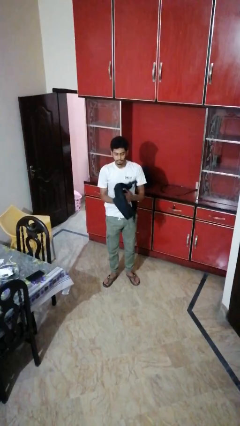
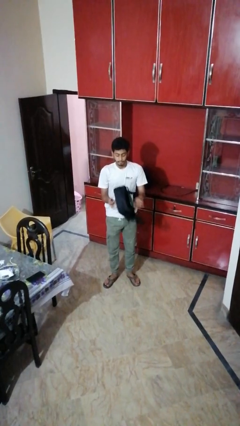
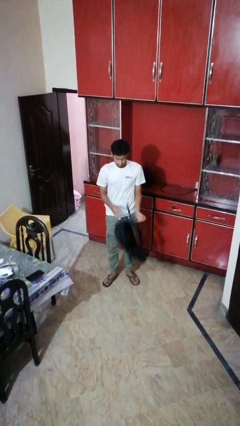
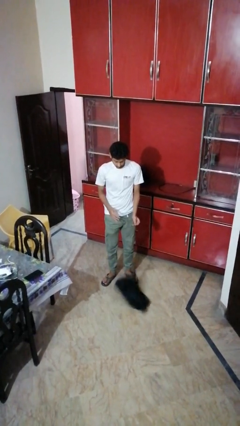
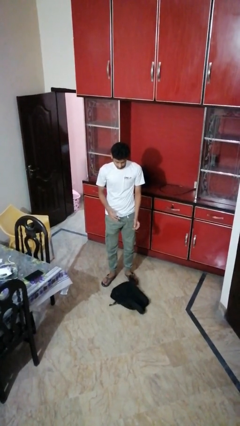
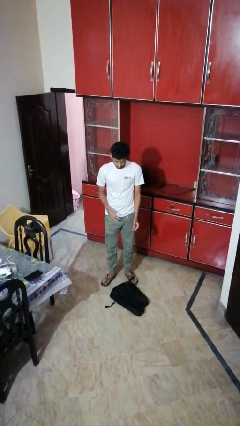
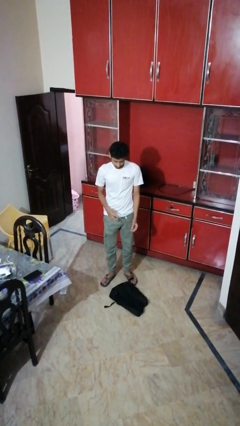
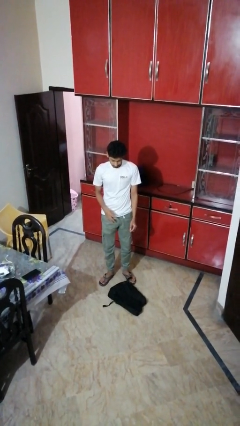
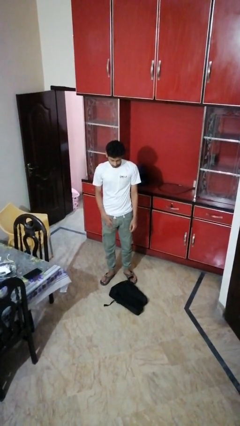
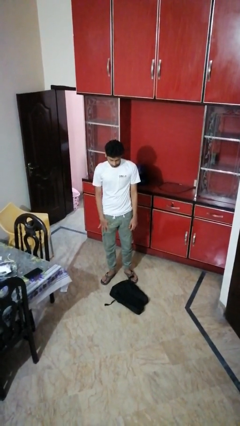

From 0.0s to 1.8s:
person drops object

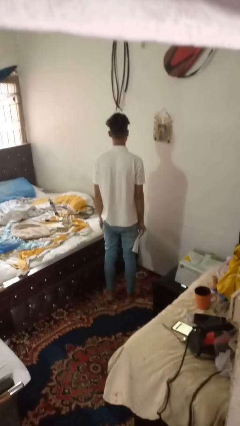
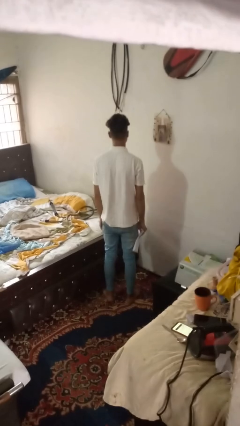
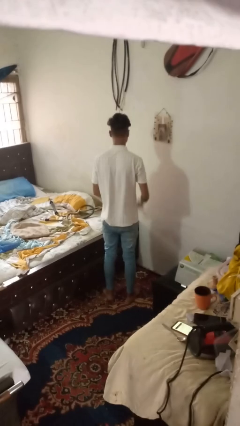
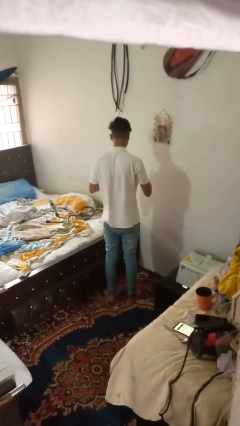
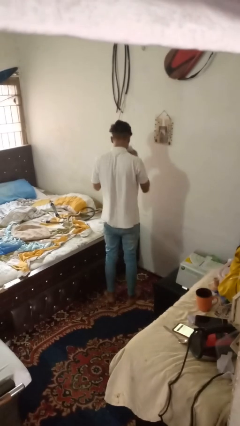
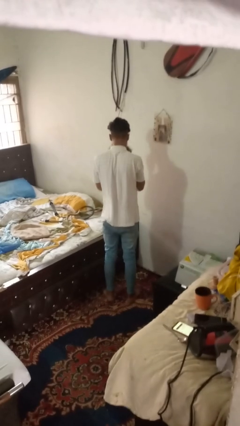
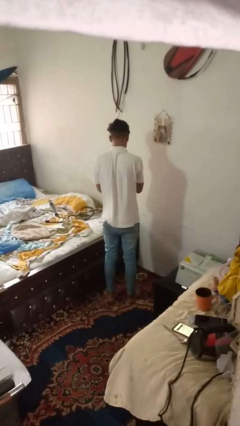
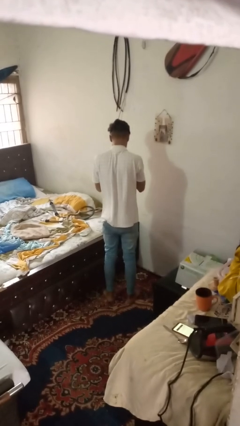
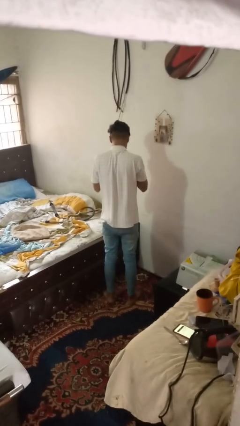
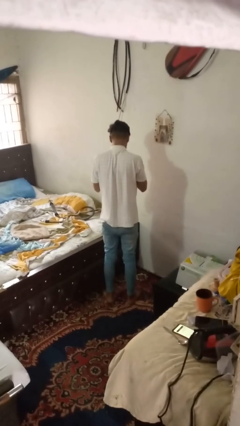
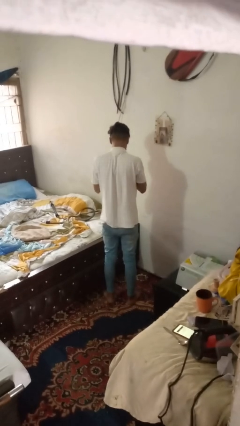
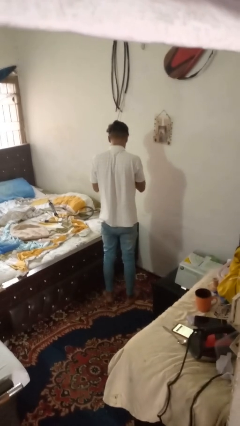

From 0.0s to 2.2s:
person blows nose

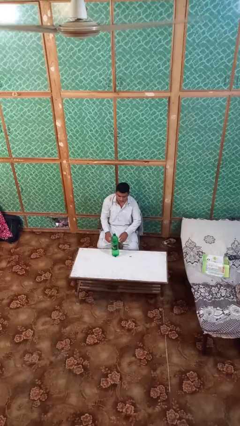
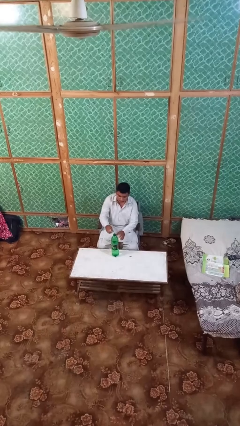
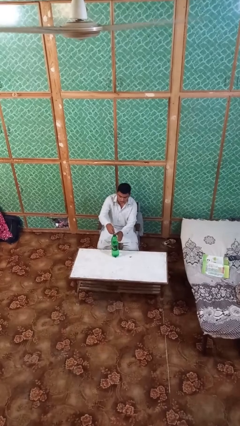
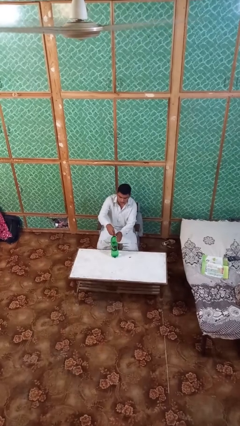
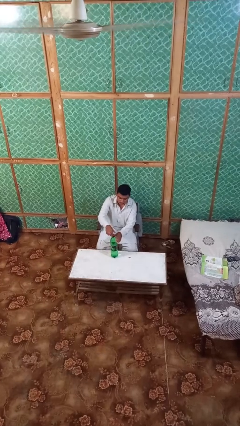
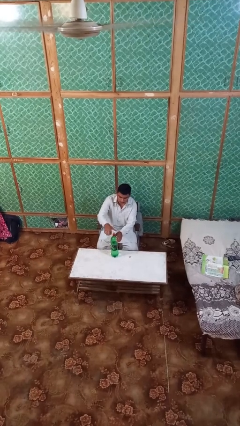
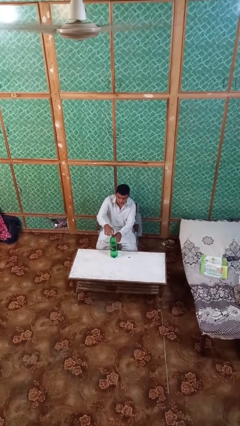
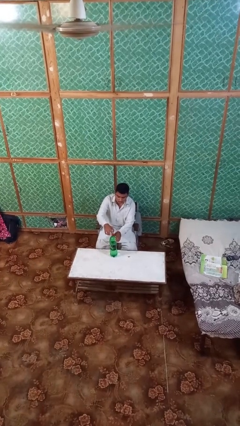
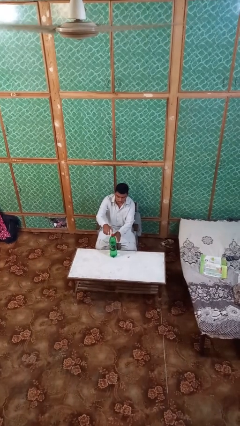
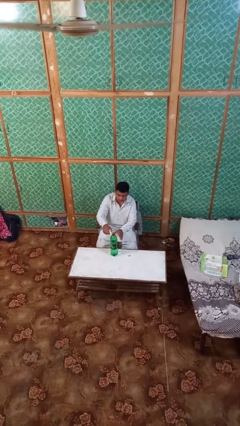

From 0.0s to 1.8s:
person screws lid to bottle

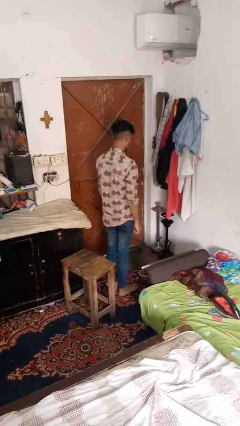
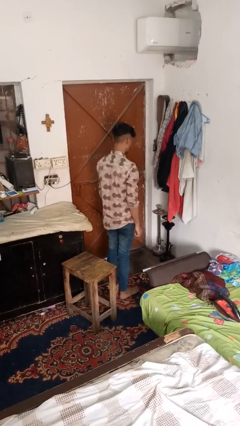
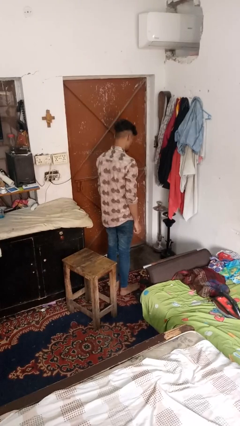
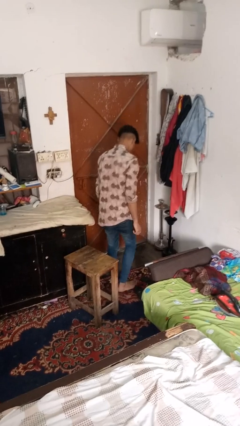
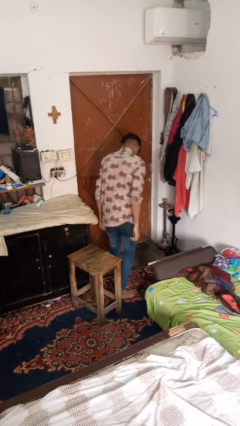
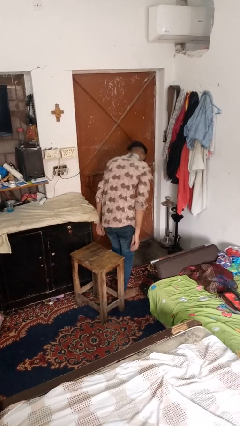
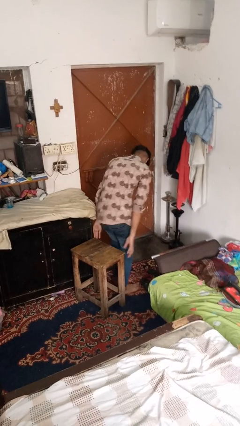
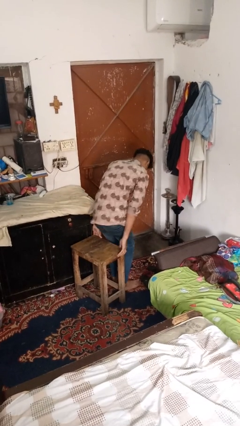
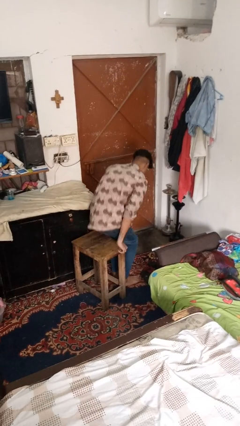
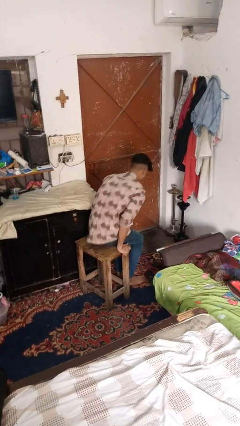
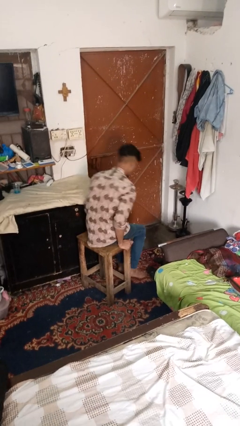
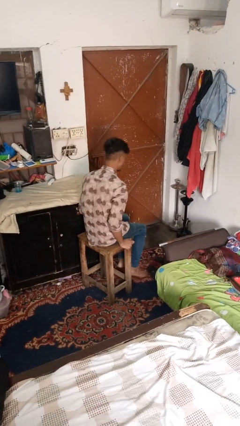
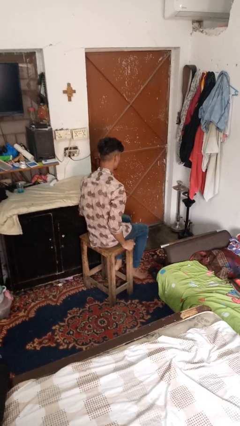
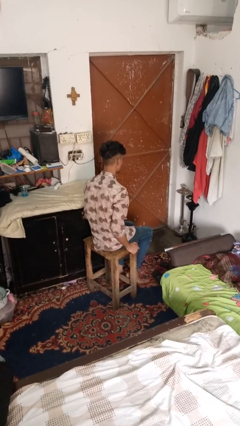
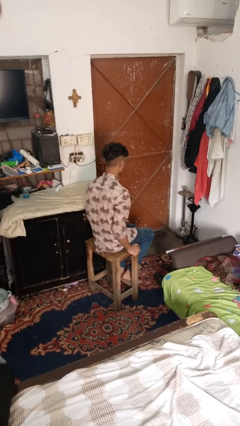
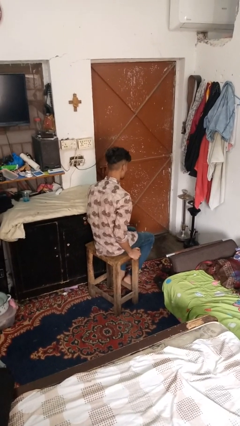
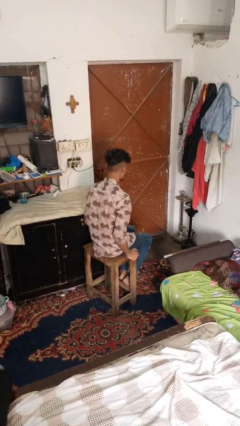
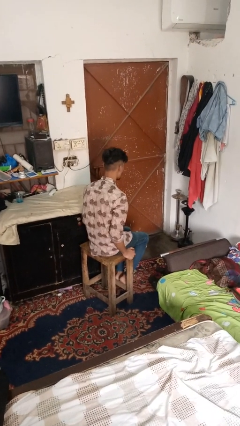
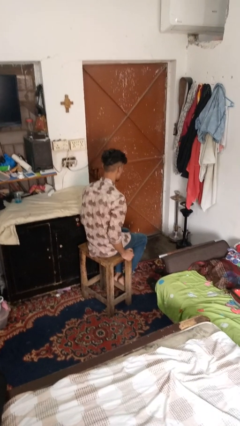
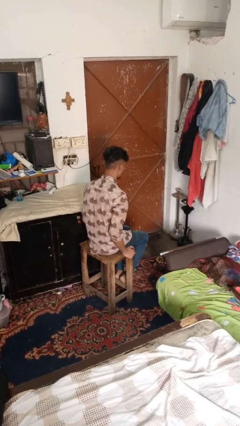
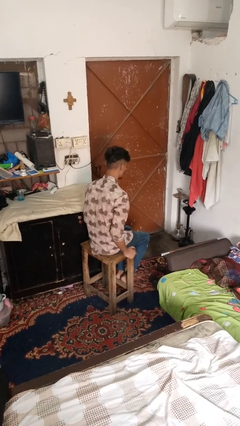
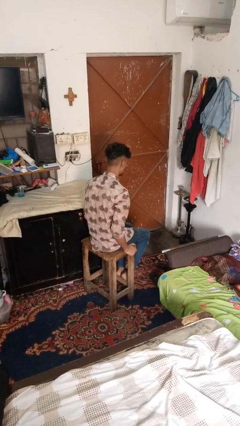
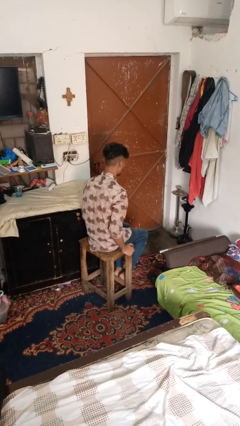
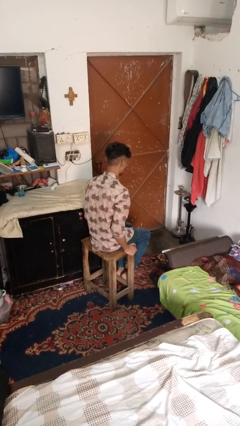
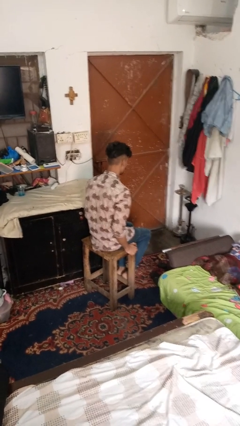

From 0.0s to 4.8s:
person sits down

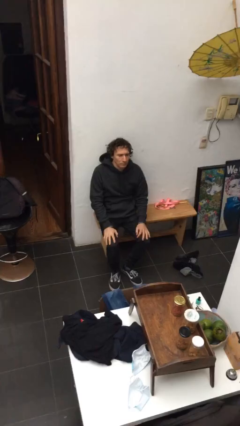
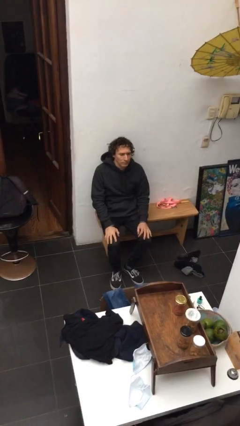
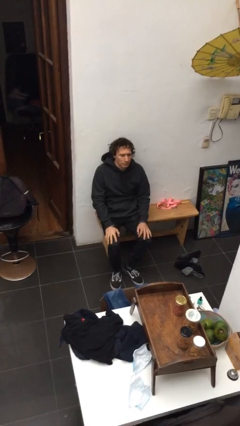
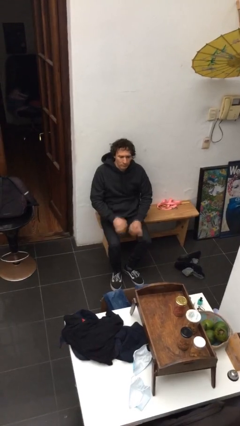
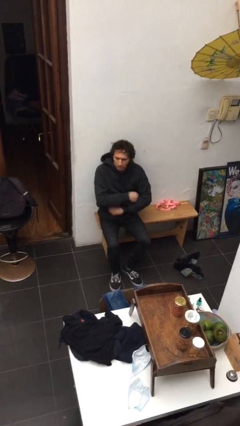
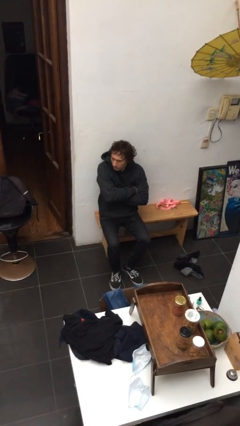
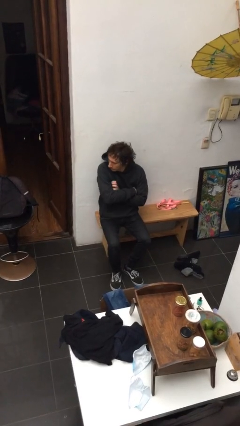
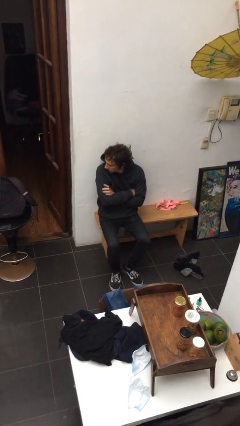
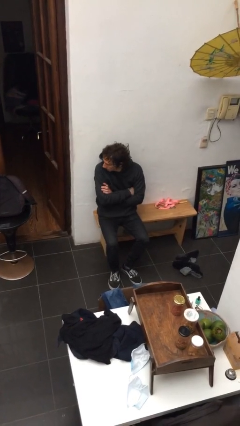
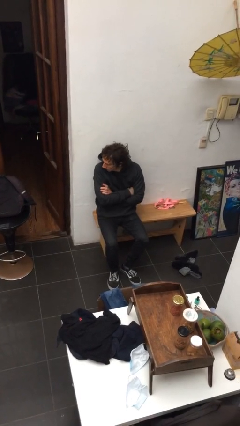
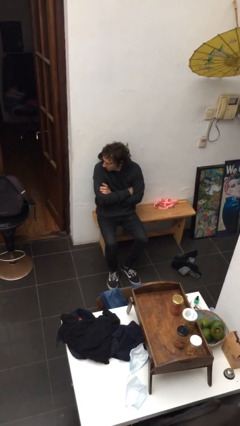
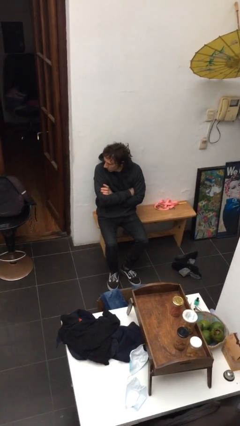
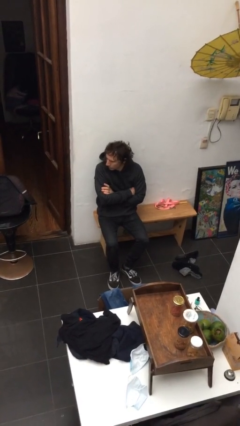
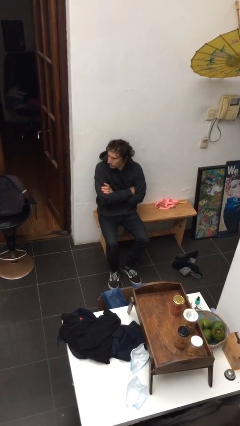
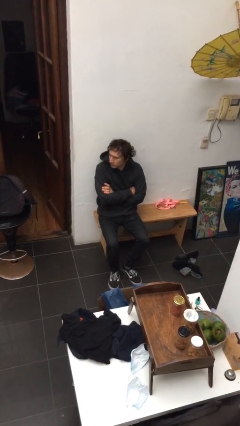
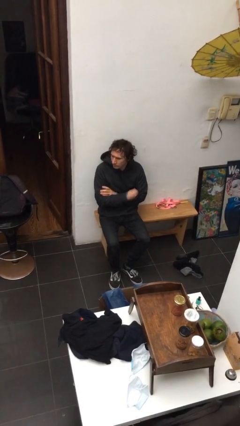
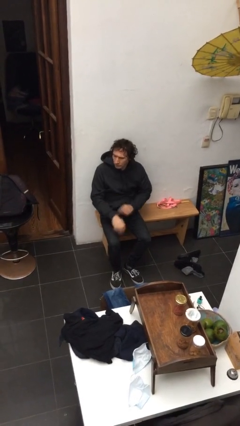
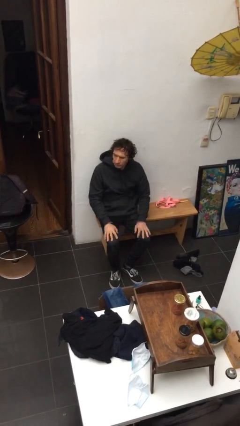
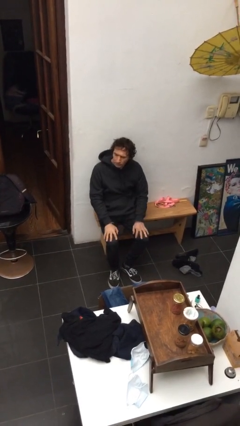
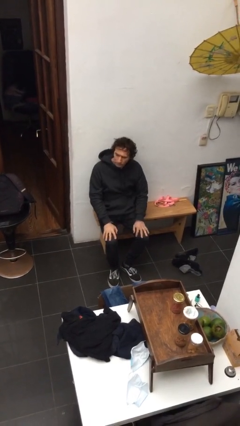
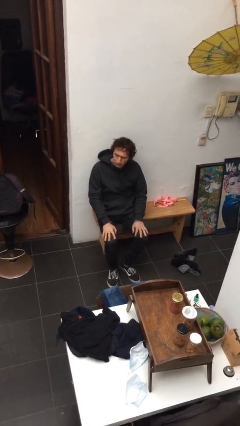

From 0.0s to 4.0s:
person crosses arms

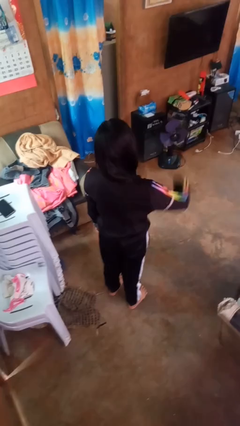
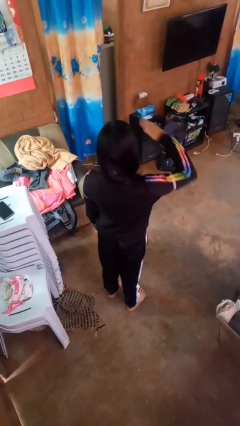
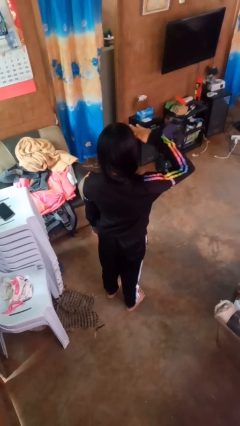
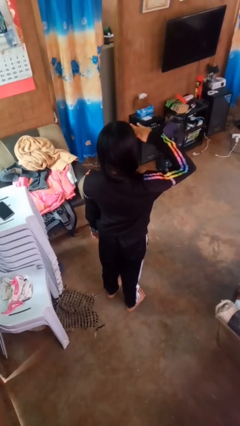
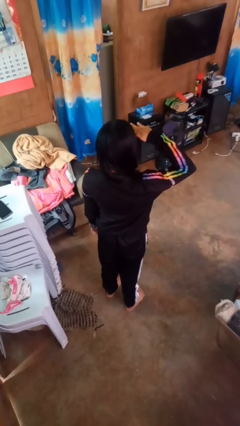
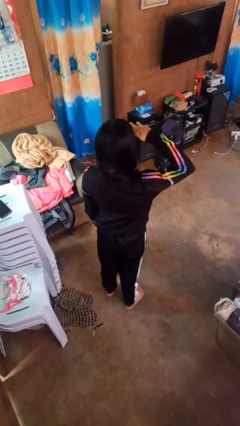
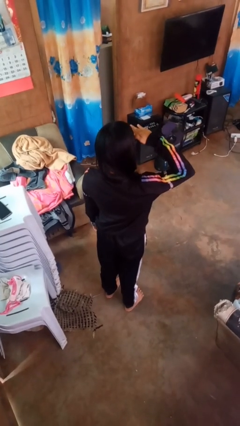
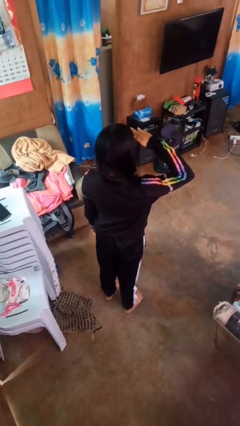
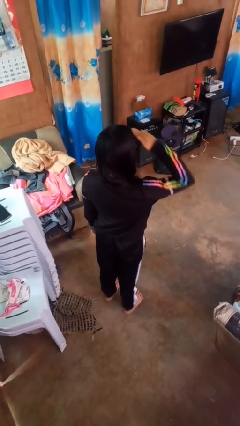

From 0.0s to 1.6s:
person salutes

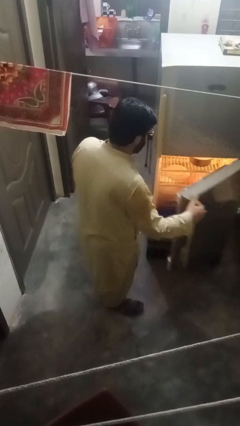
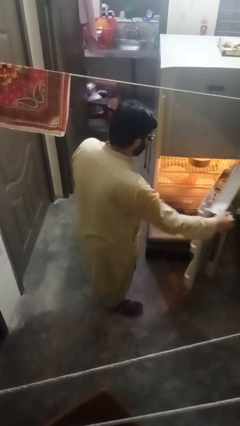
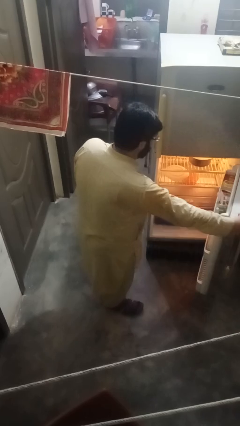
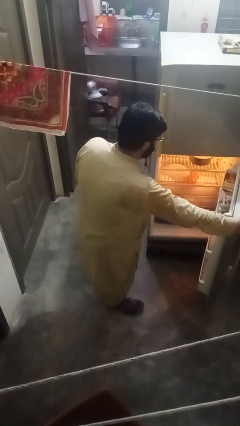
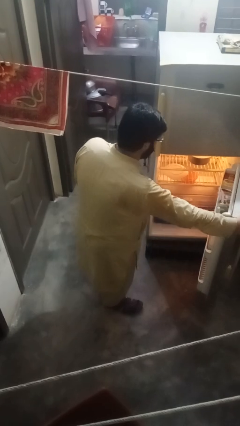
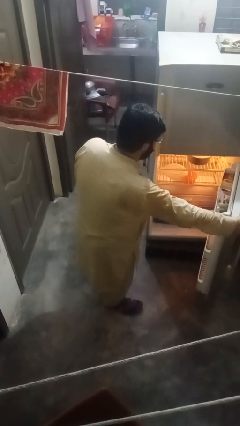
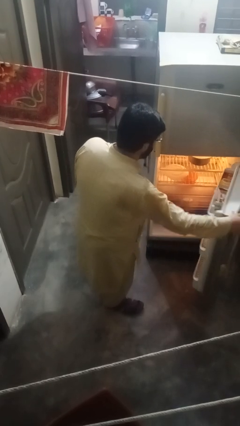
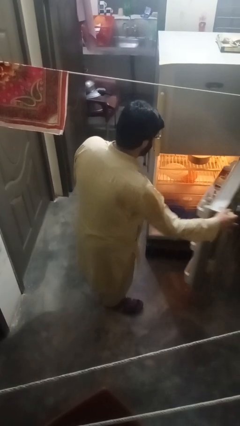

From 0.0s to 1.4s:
person opens refrigerator
